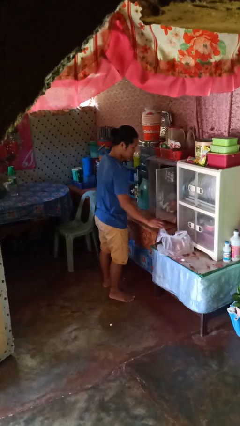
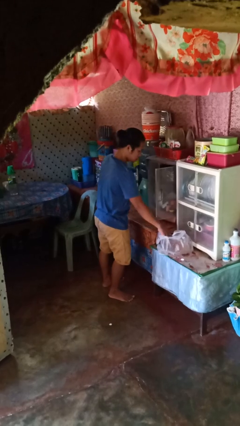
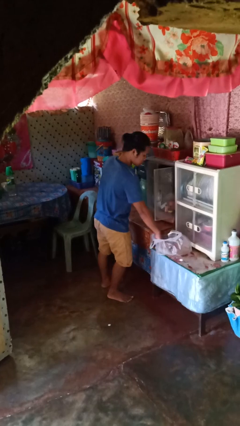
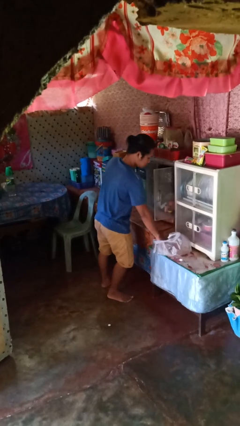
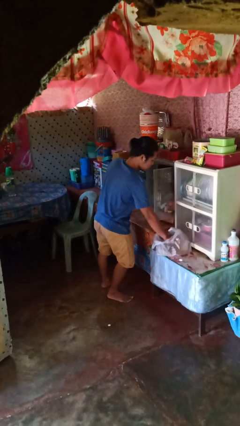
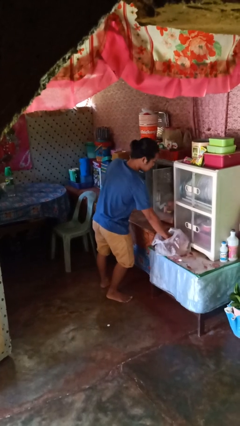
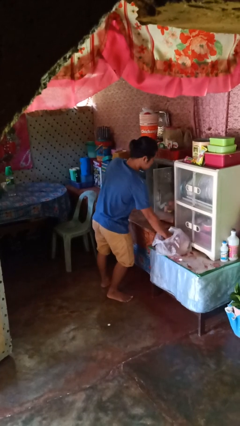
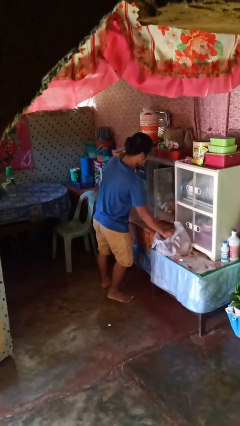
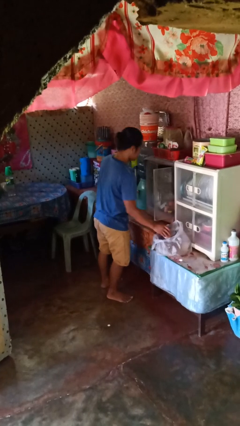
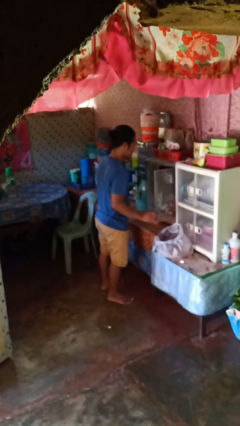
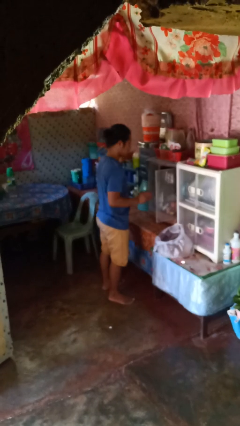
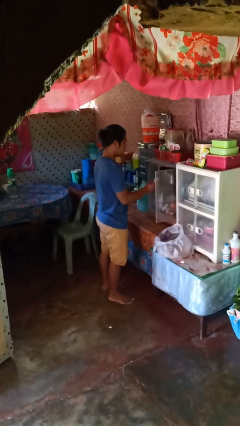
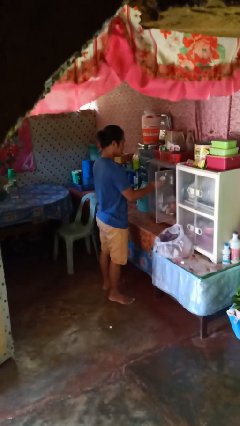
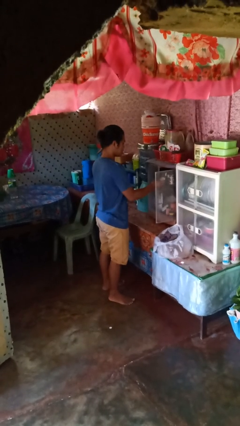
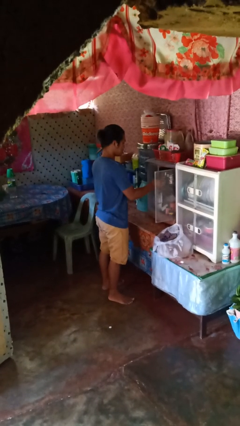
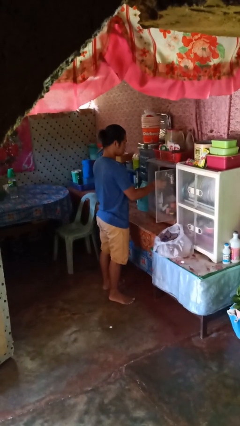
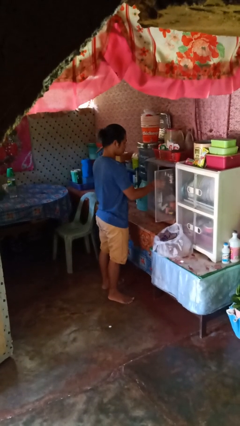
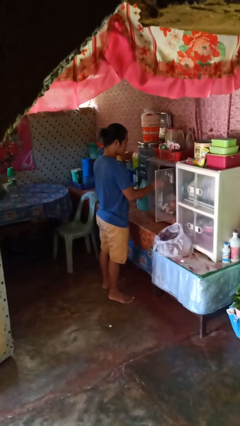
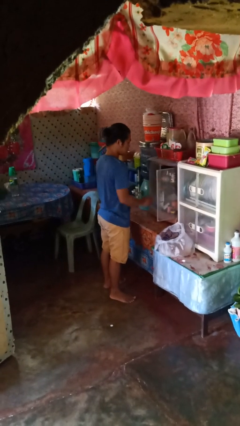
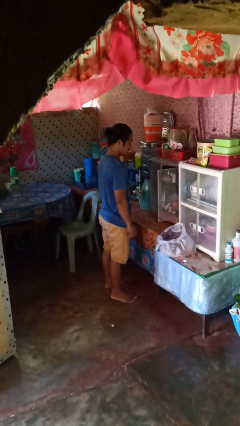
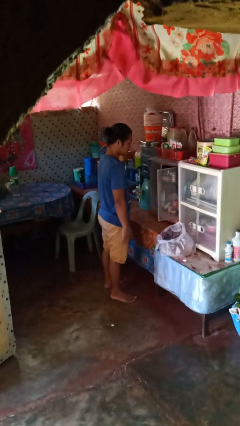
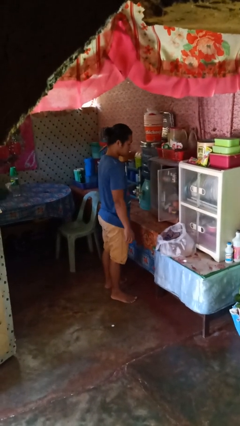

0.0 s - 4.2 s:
person loads groceries into cabinet

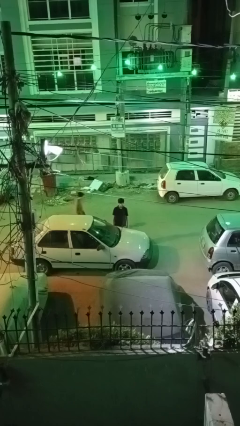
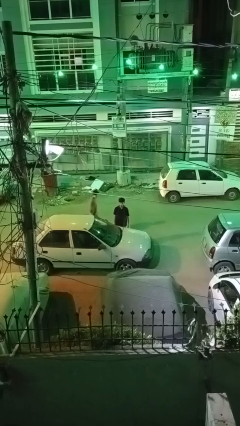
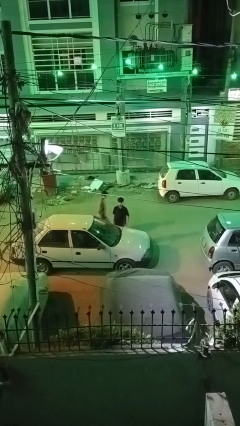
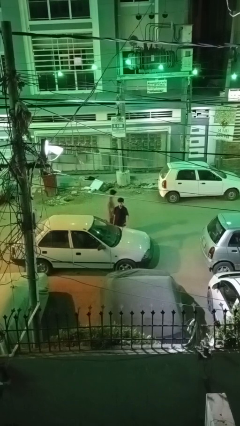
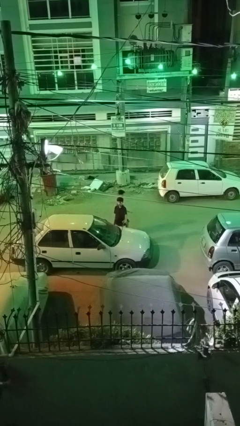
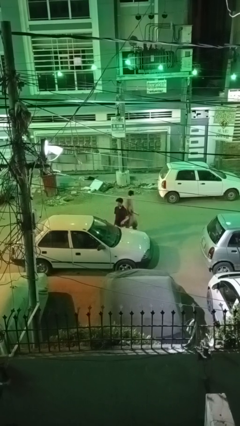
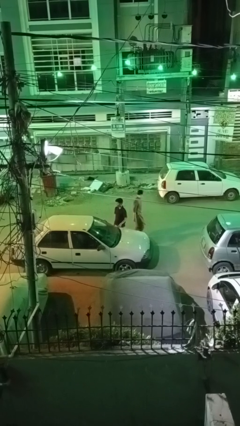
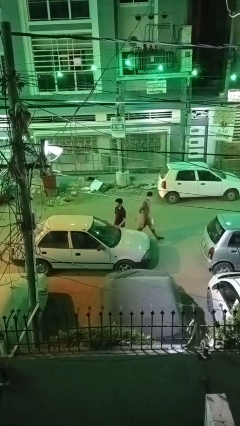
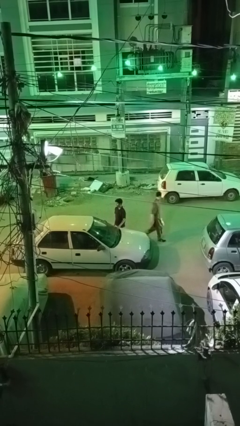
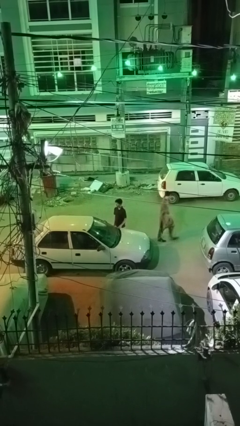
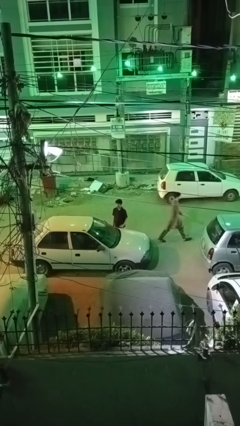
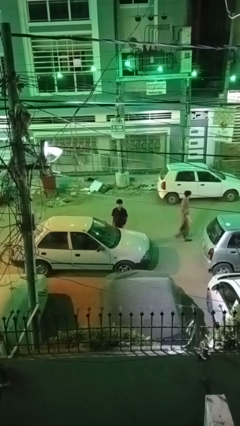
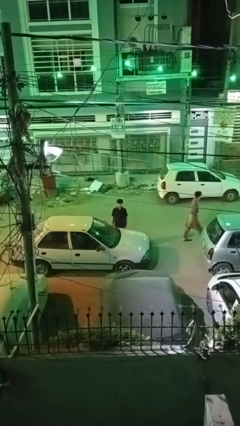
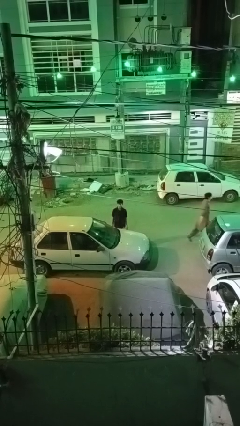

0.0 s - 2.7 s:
person flips down car wipers

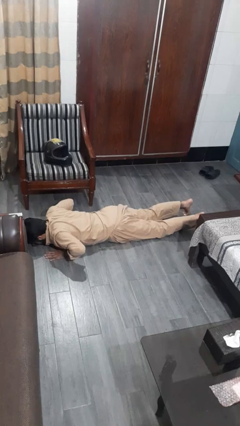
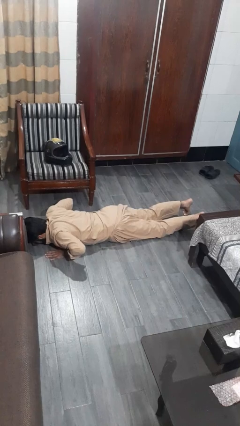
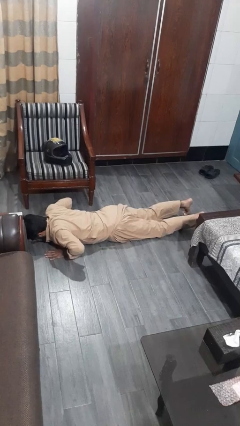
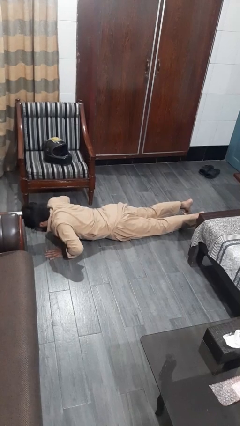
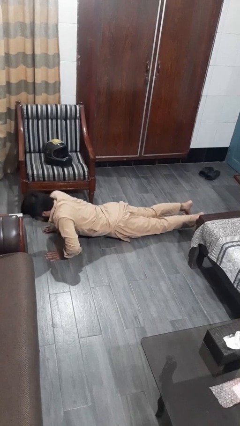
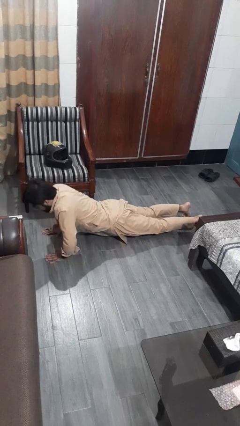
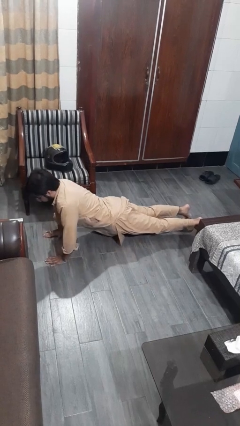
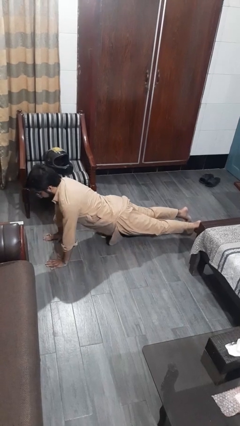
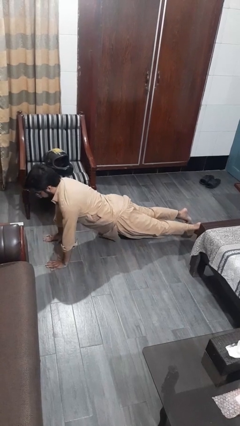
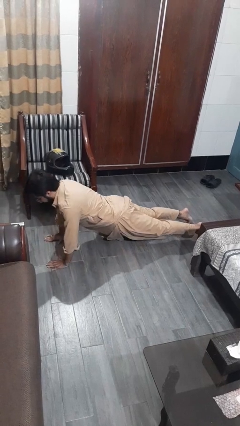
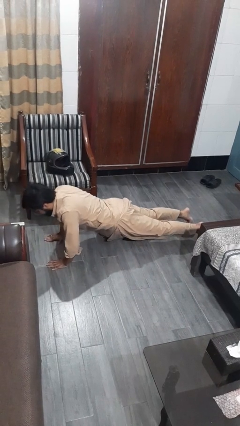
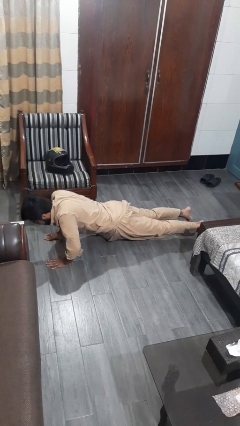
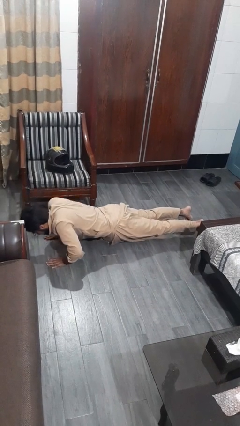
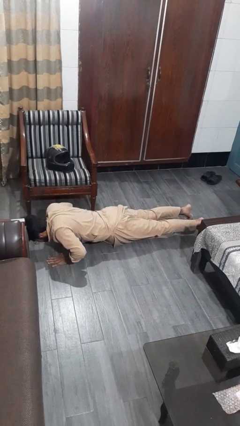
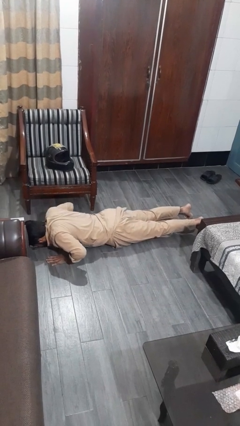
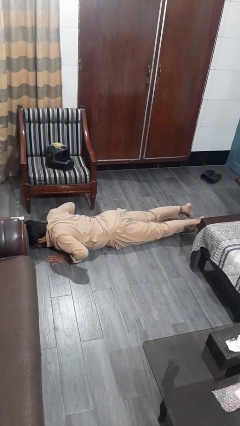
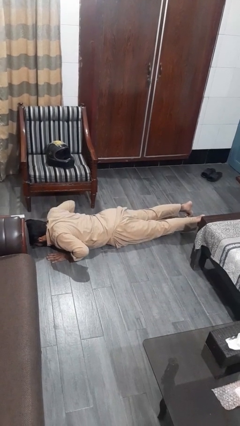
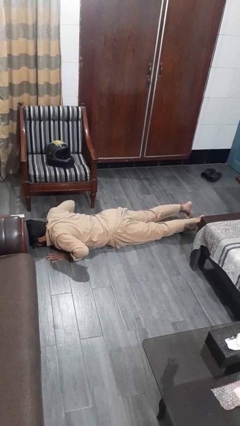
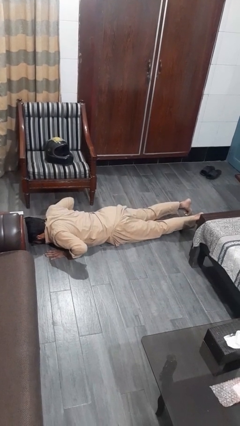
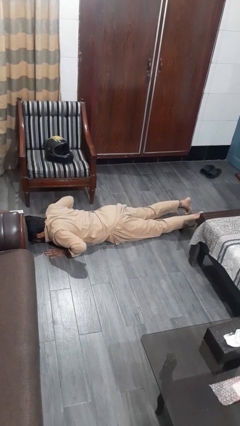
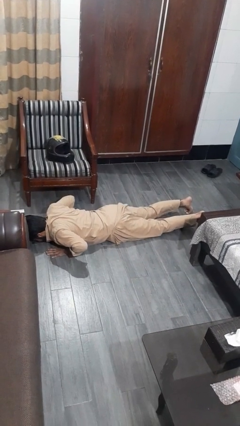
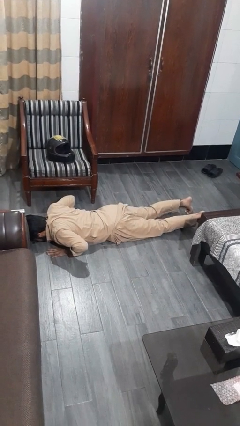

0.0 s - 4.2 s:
person exercises with pushup

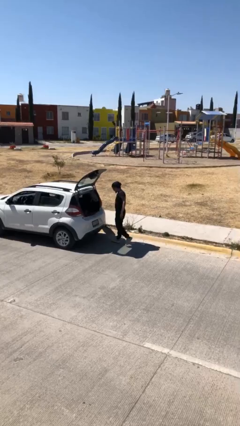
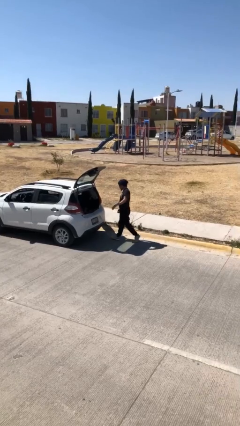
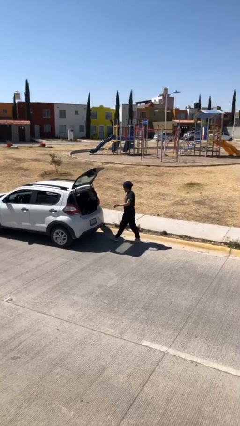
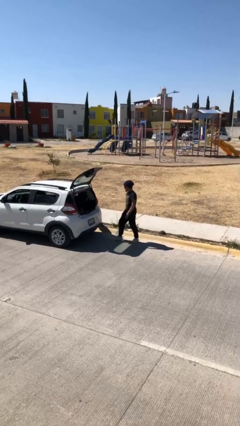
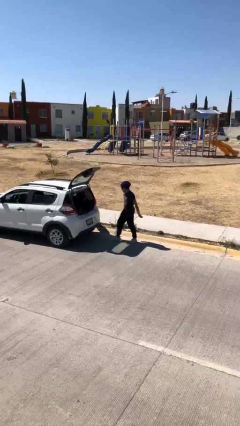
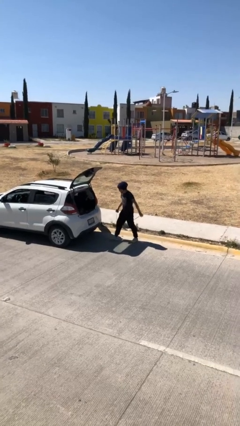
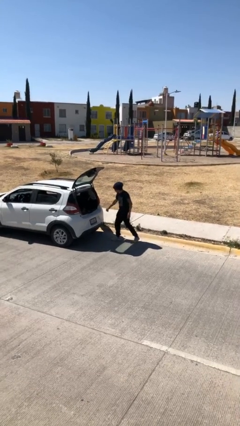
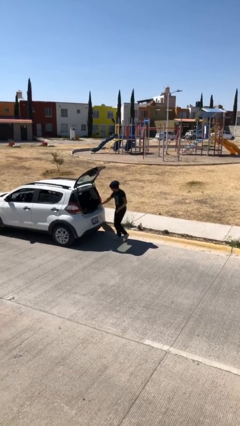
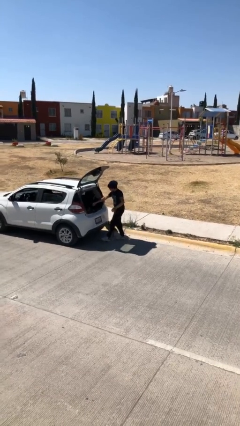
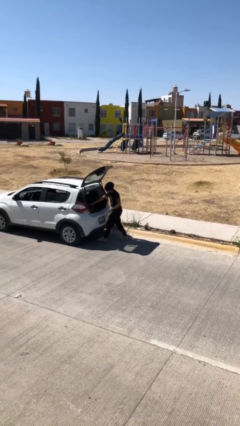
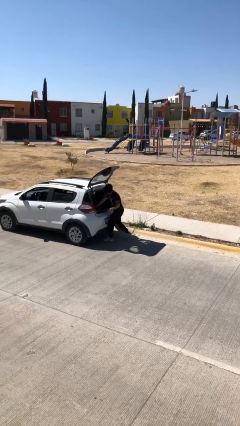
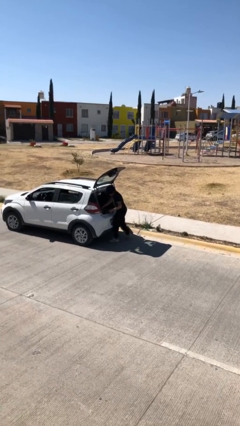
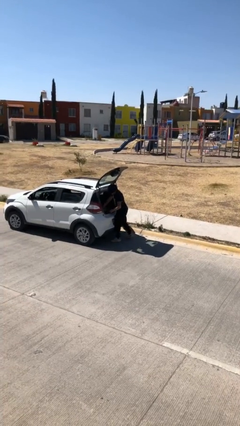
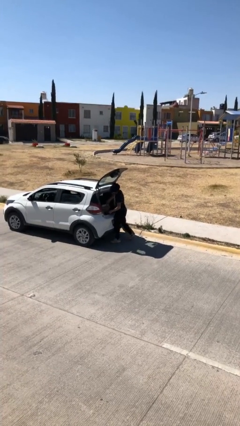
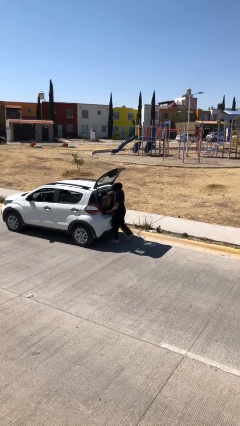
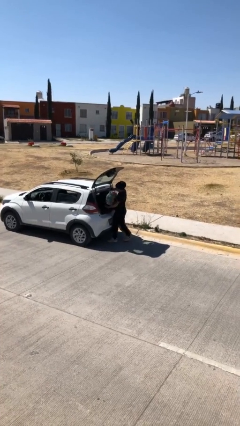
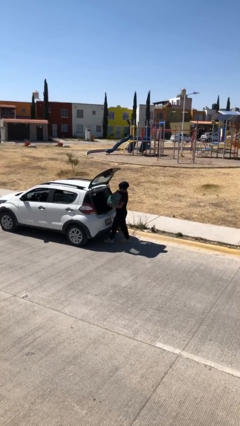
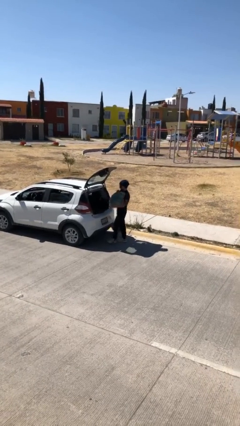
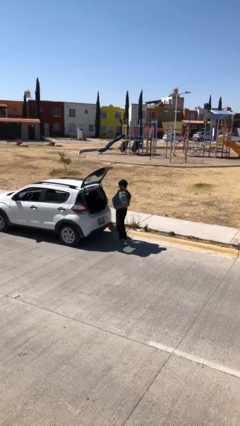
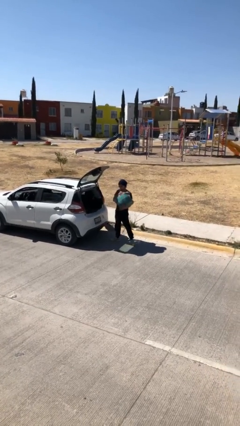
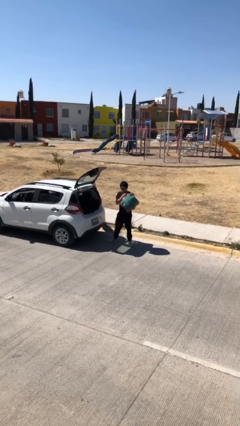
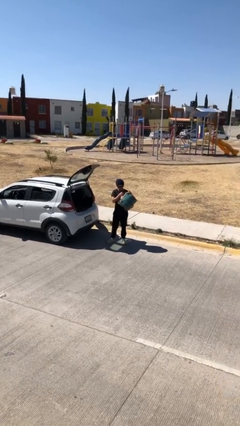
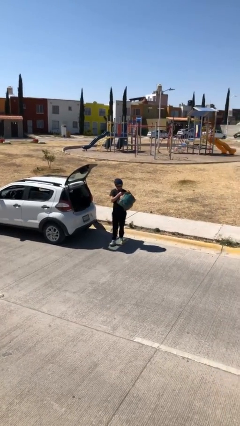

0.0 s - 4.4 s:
person unloads car

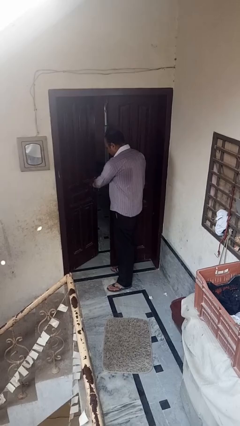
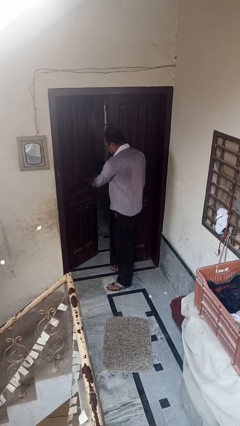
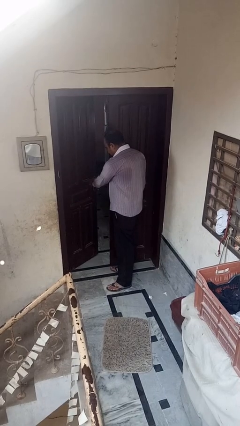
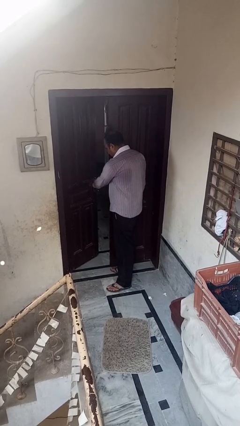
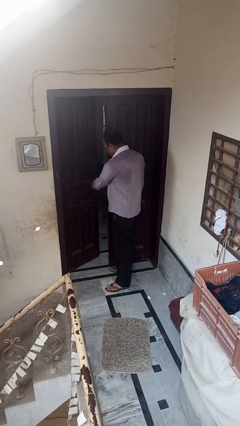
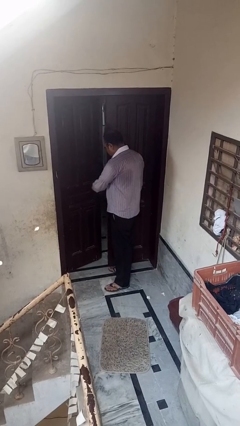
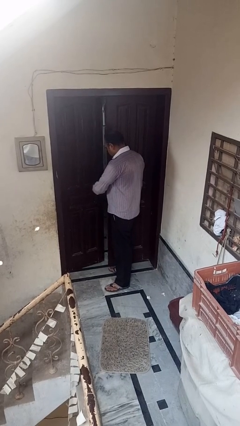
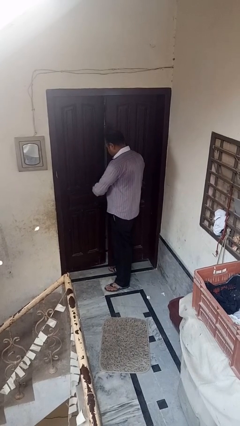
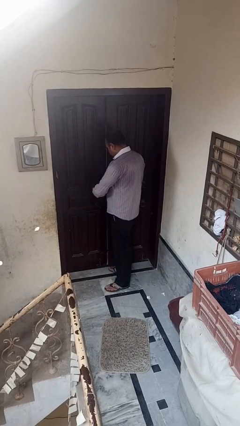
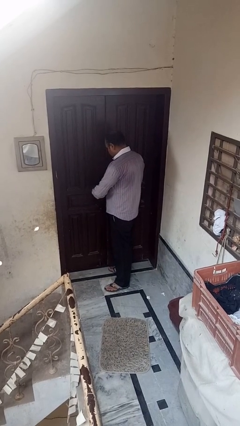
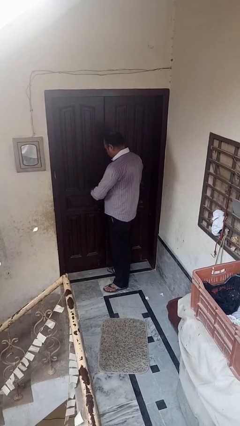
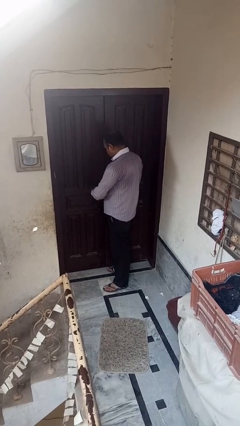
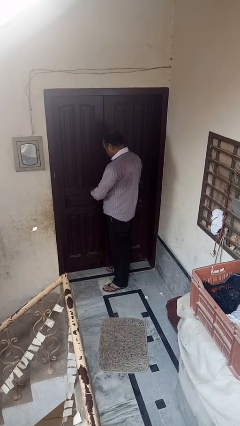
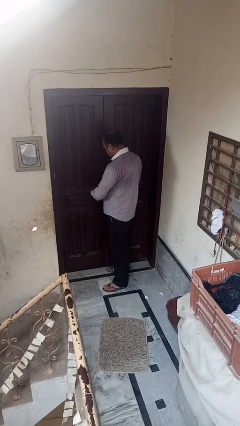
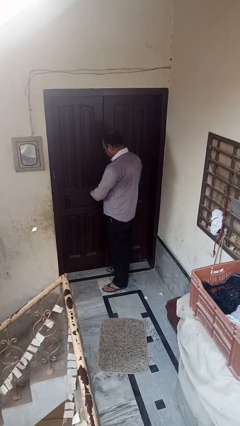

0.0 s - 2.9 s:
person closes facility door
